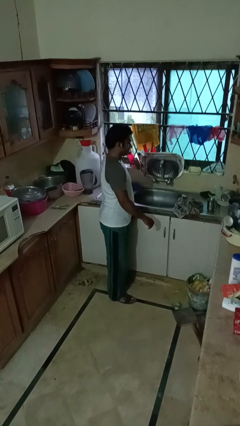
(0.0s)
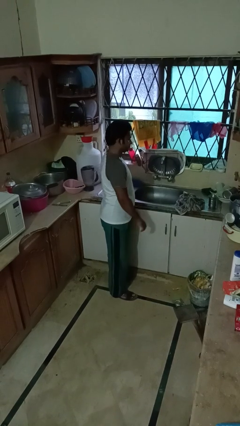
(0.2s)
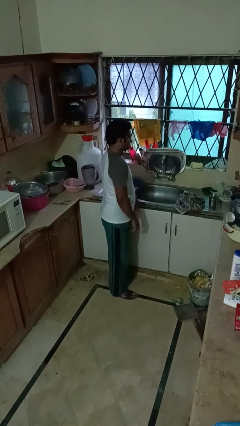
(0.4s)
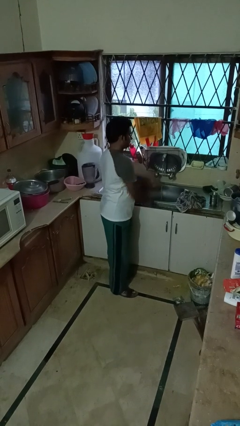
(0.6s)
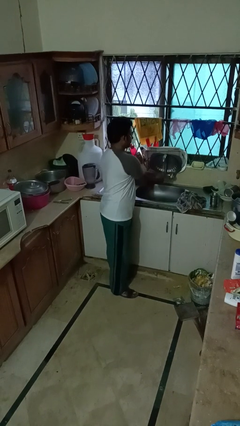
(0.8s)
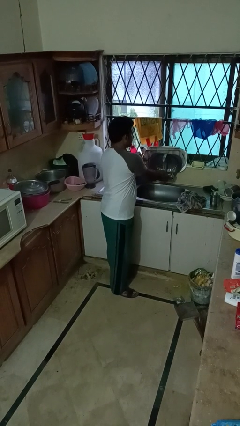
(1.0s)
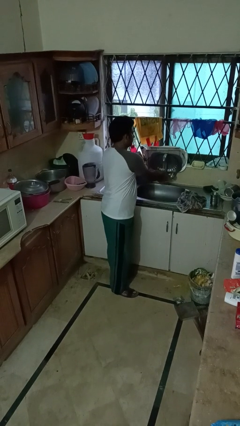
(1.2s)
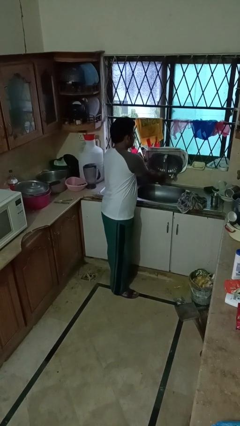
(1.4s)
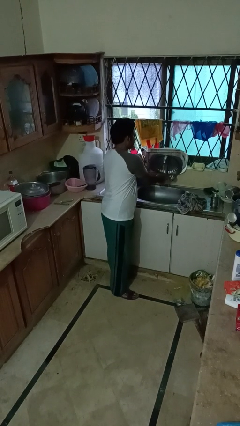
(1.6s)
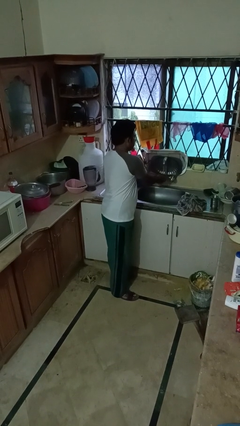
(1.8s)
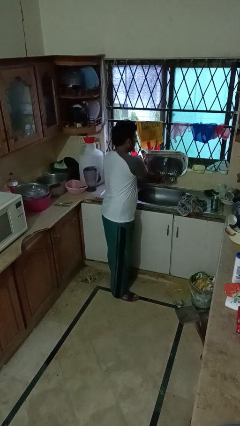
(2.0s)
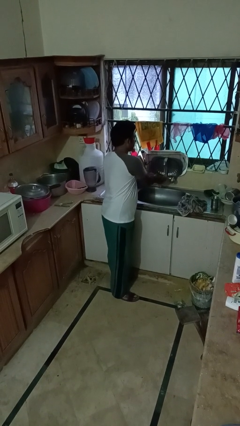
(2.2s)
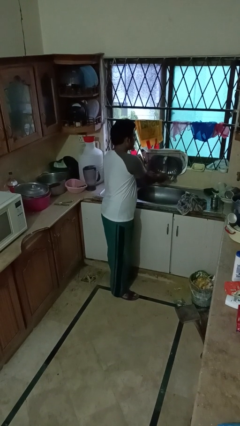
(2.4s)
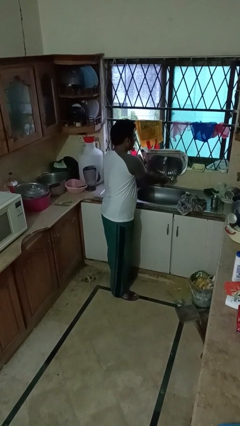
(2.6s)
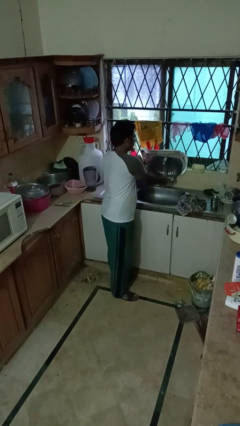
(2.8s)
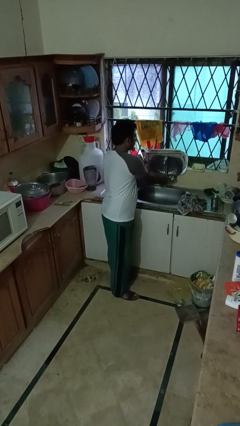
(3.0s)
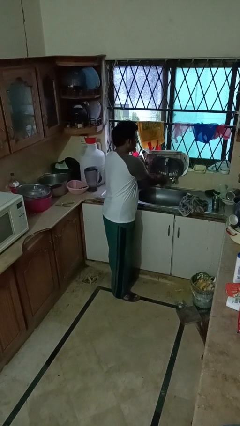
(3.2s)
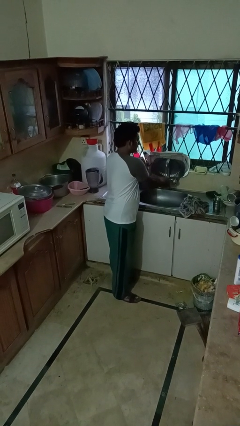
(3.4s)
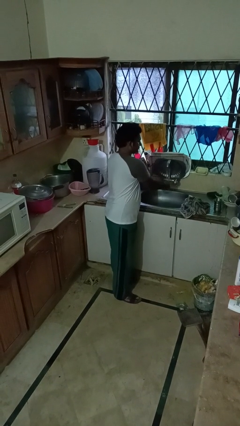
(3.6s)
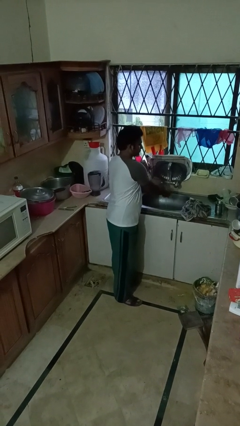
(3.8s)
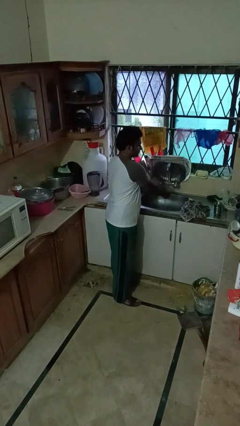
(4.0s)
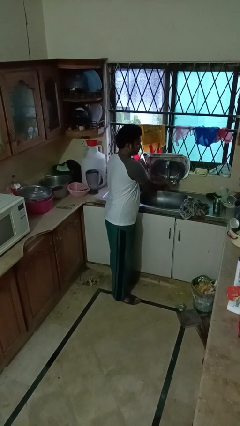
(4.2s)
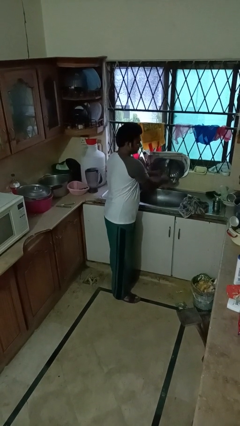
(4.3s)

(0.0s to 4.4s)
person washes hands

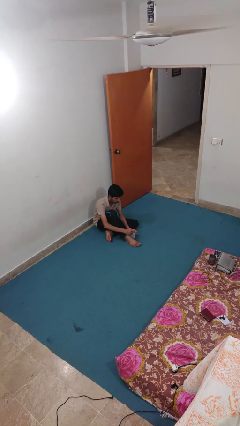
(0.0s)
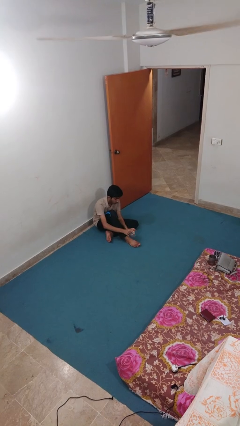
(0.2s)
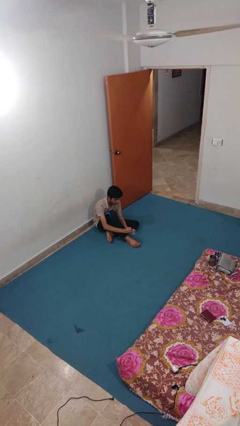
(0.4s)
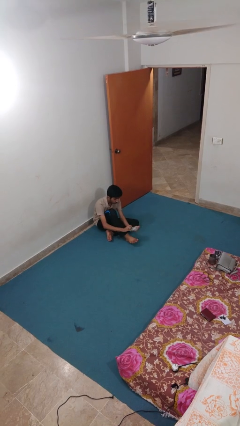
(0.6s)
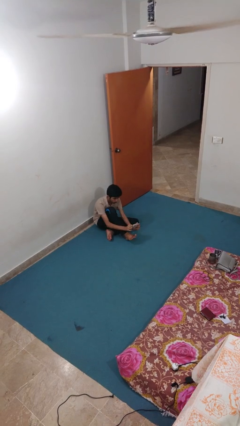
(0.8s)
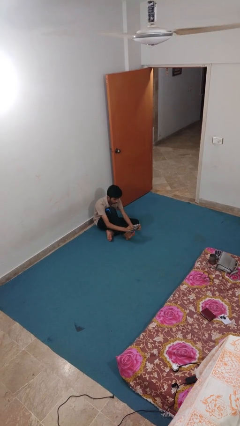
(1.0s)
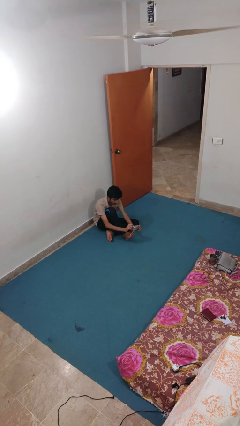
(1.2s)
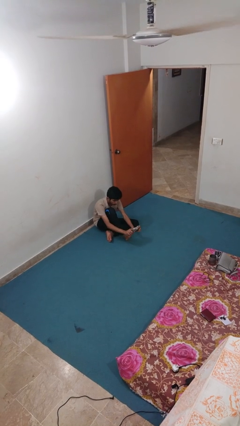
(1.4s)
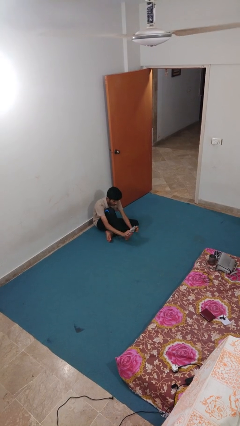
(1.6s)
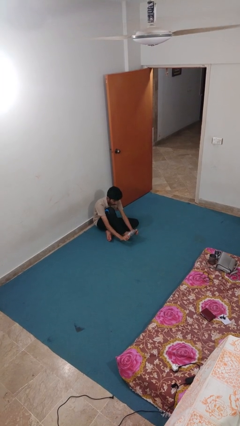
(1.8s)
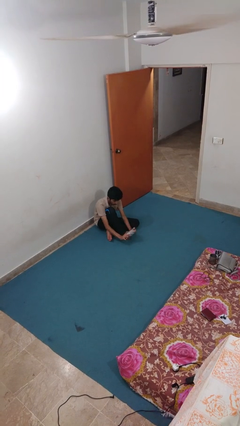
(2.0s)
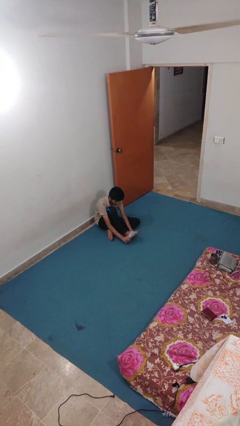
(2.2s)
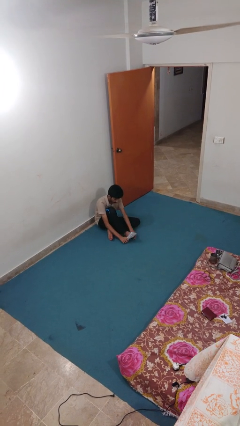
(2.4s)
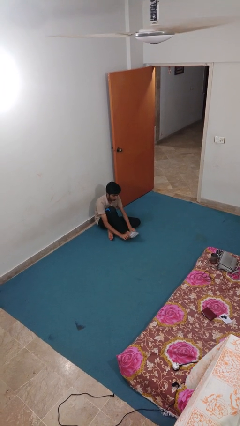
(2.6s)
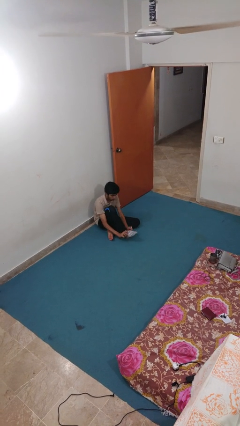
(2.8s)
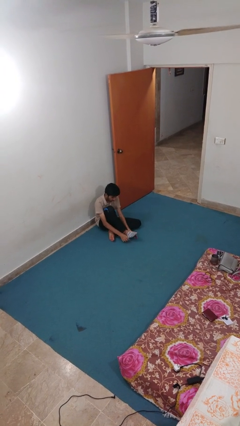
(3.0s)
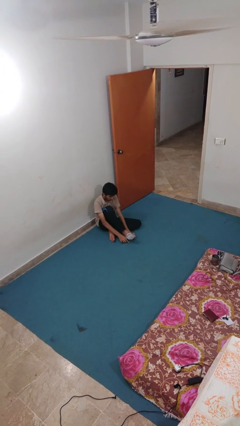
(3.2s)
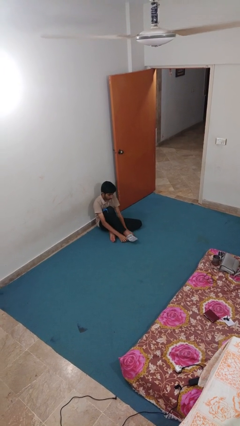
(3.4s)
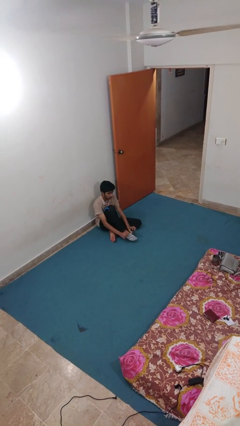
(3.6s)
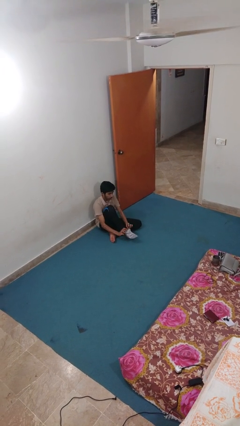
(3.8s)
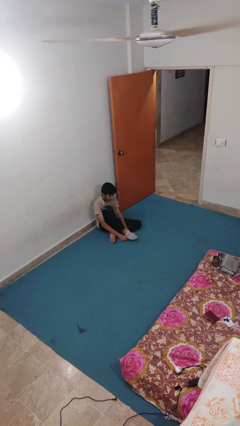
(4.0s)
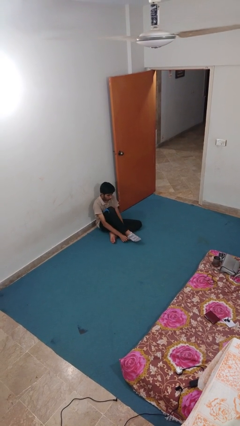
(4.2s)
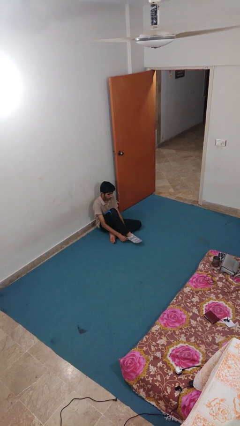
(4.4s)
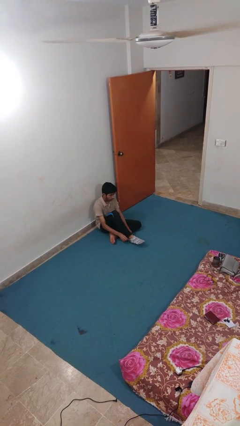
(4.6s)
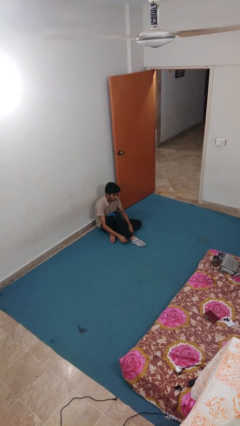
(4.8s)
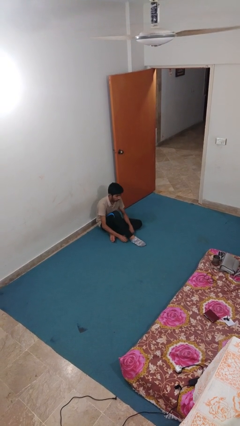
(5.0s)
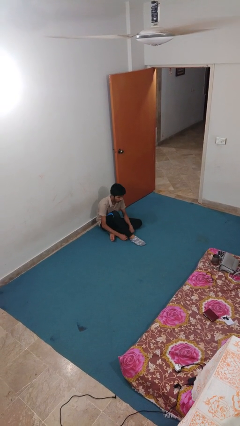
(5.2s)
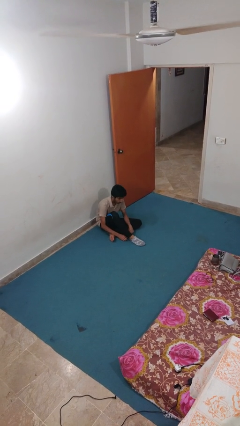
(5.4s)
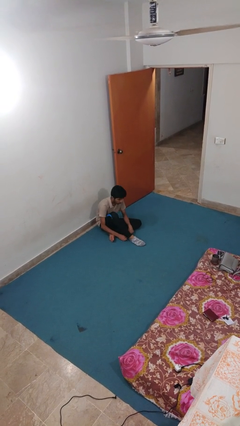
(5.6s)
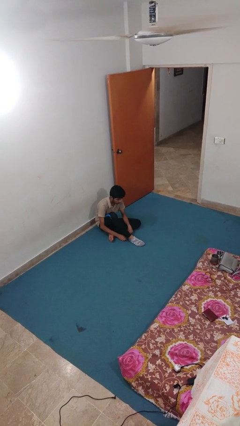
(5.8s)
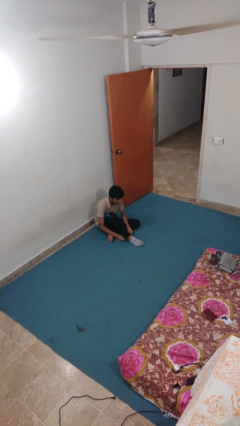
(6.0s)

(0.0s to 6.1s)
person puts on socks

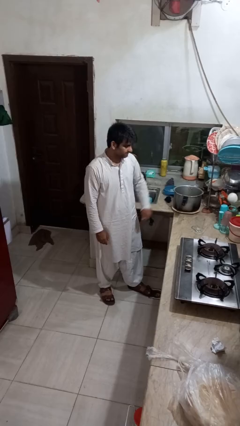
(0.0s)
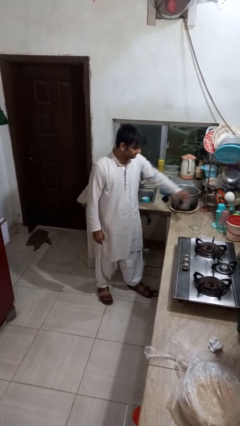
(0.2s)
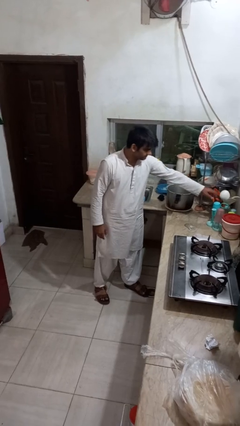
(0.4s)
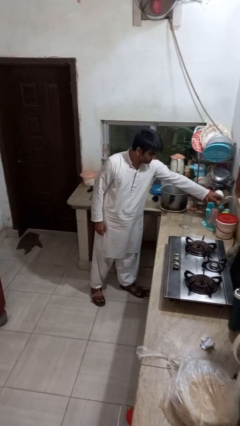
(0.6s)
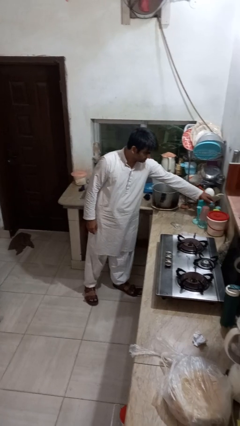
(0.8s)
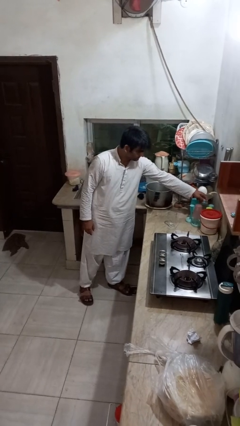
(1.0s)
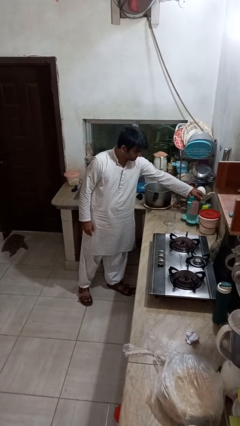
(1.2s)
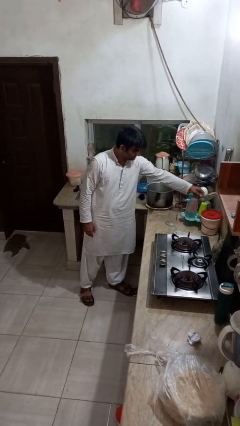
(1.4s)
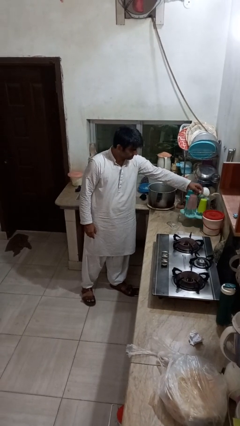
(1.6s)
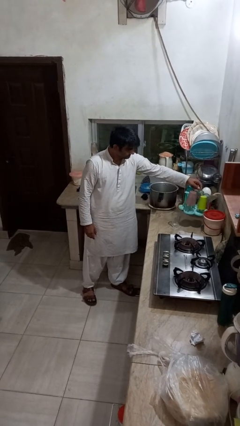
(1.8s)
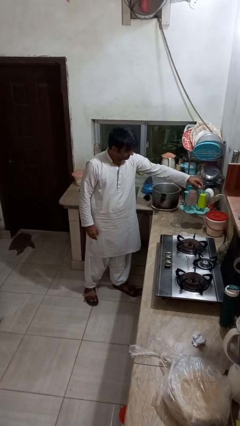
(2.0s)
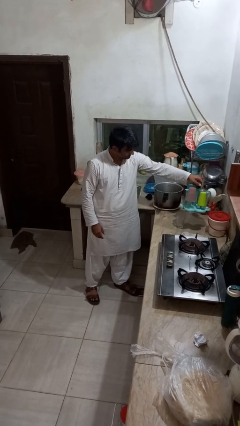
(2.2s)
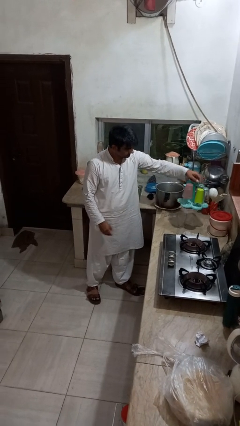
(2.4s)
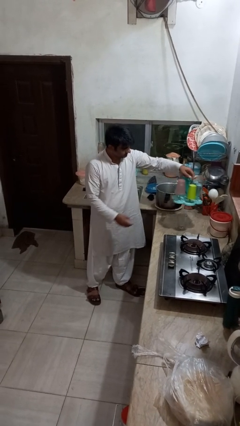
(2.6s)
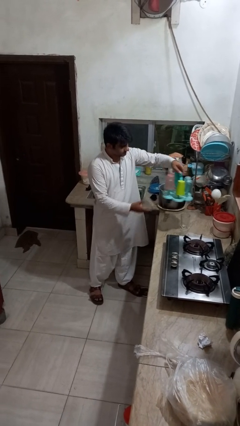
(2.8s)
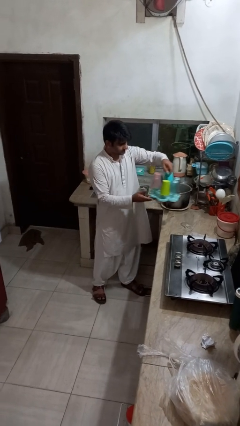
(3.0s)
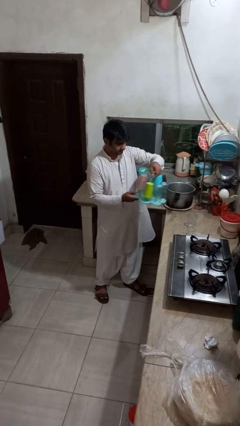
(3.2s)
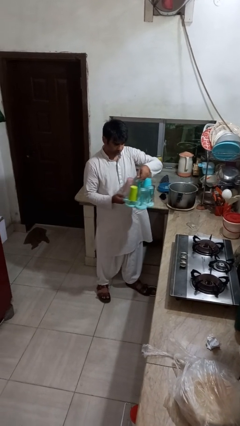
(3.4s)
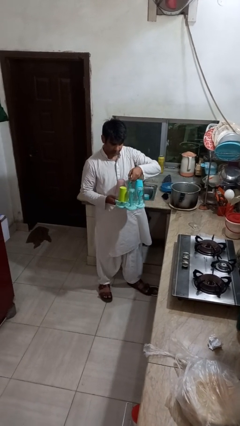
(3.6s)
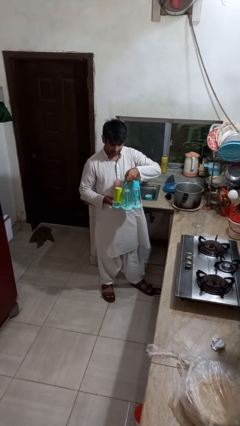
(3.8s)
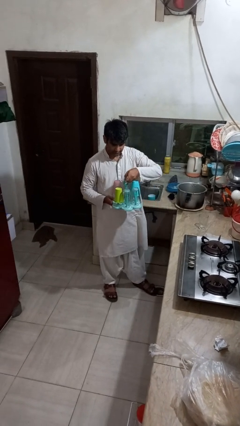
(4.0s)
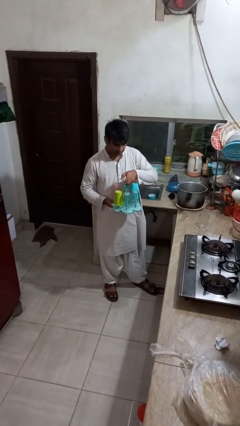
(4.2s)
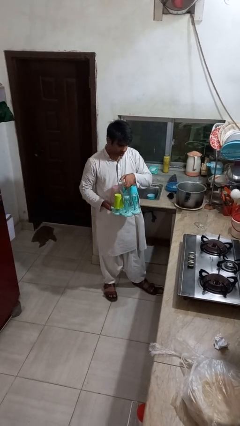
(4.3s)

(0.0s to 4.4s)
person picks up object from countertop

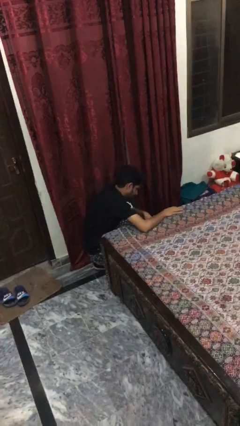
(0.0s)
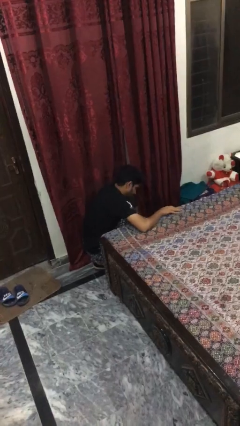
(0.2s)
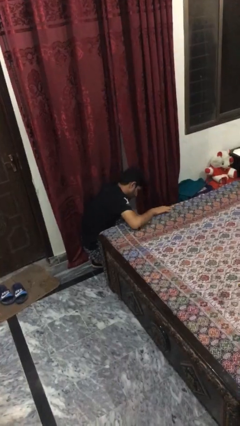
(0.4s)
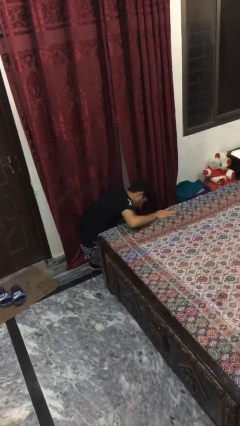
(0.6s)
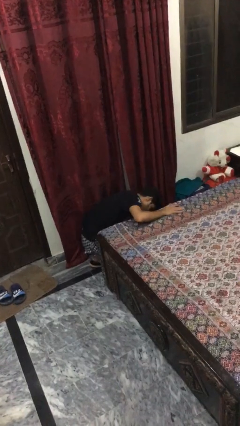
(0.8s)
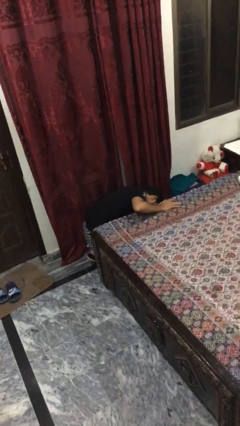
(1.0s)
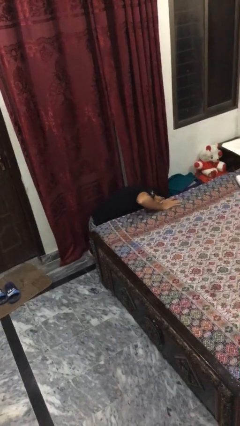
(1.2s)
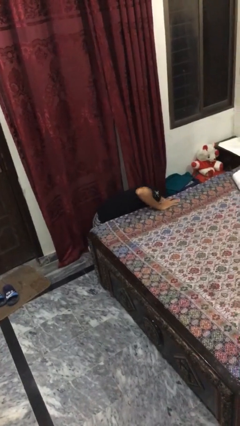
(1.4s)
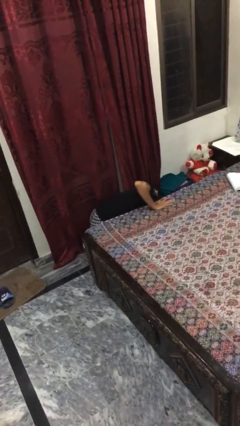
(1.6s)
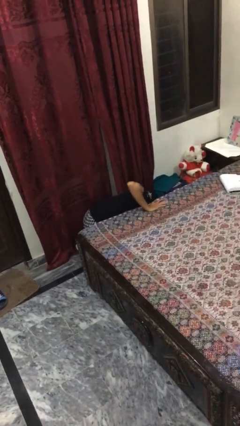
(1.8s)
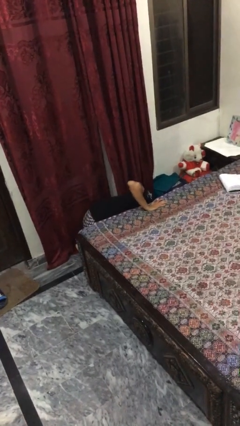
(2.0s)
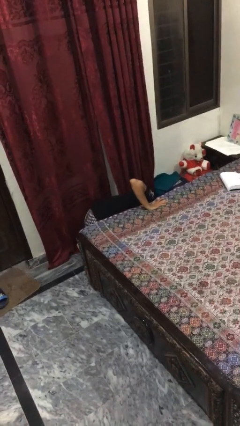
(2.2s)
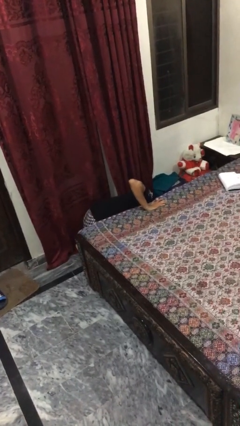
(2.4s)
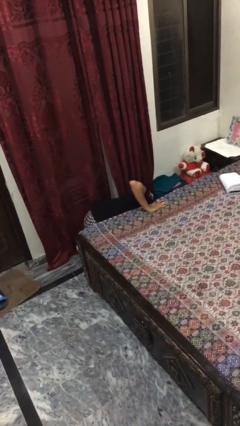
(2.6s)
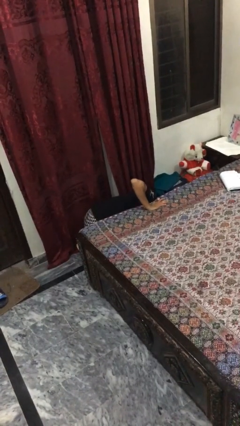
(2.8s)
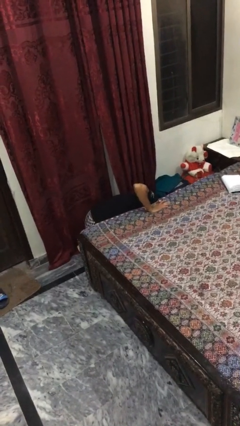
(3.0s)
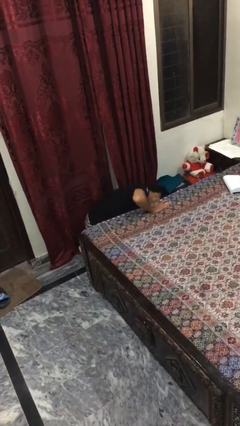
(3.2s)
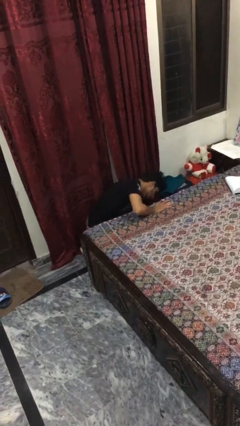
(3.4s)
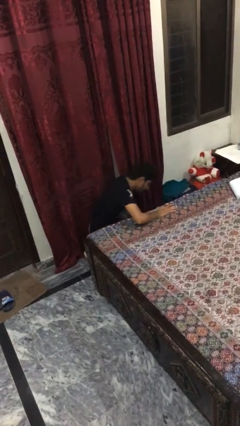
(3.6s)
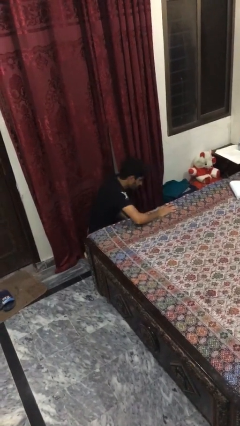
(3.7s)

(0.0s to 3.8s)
person searches under bed
